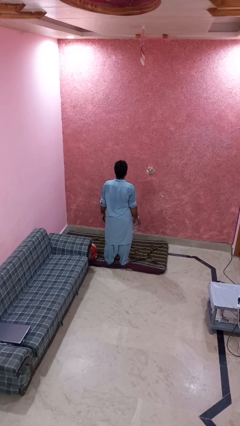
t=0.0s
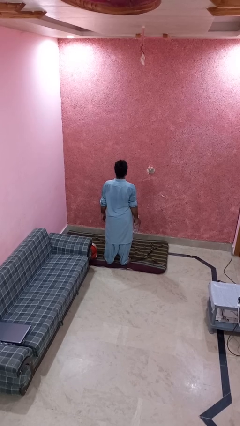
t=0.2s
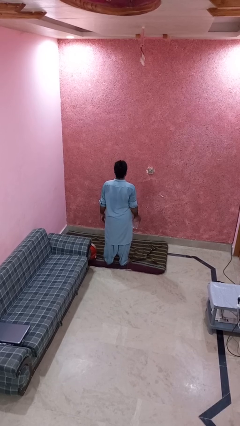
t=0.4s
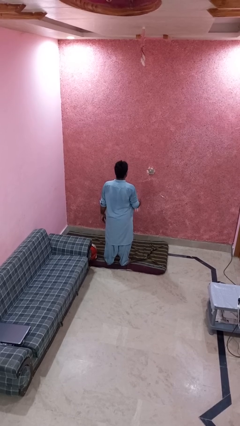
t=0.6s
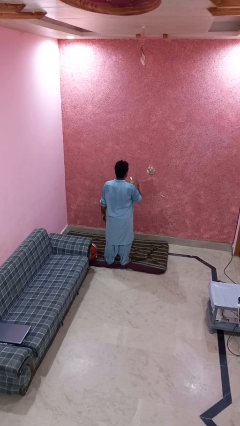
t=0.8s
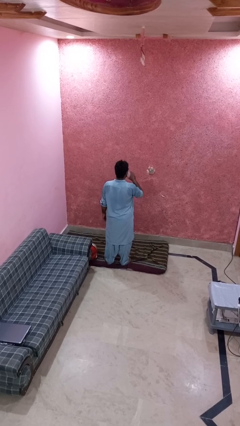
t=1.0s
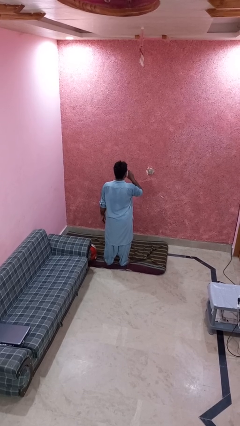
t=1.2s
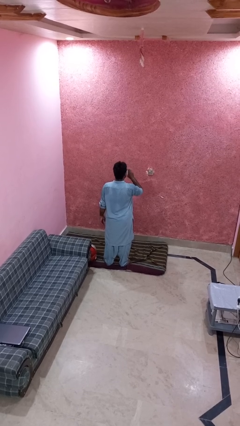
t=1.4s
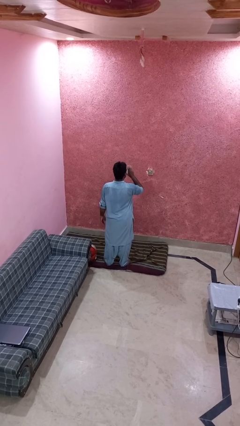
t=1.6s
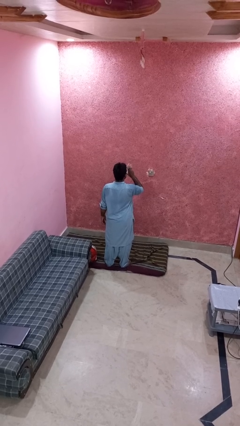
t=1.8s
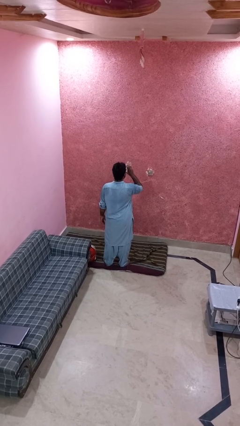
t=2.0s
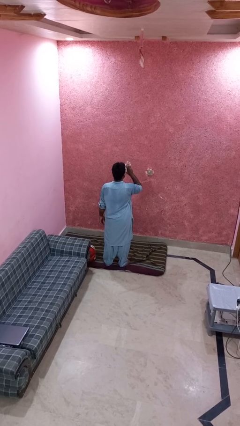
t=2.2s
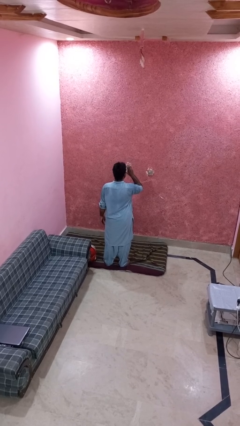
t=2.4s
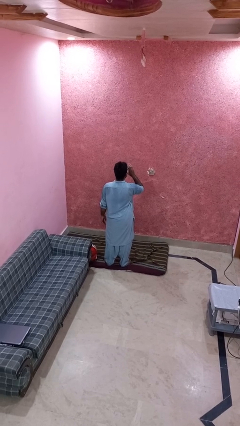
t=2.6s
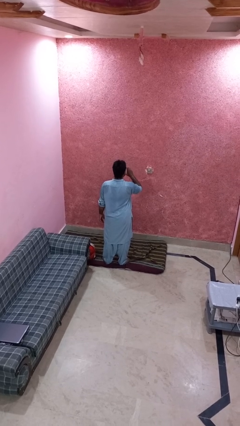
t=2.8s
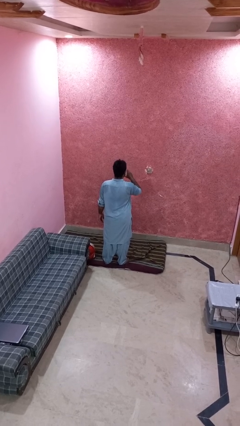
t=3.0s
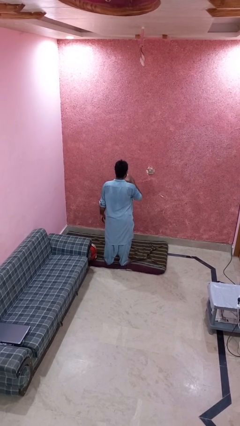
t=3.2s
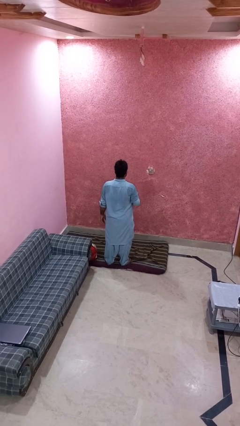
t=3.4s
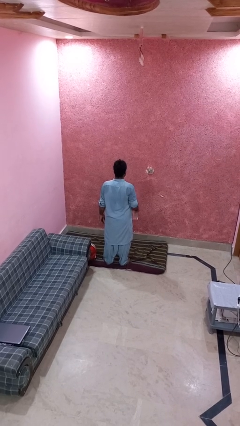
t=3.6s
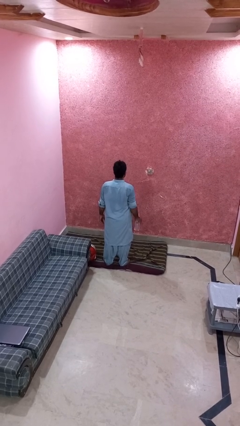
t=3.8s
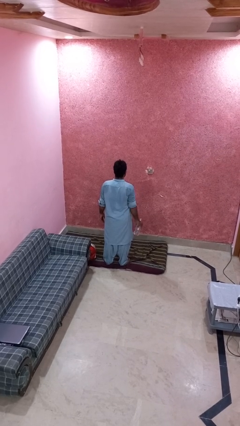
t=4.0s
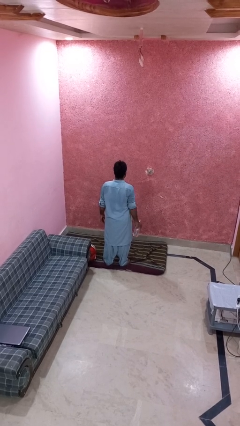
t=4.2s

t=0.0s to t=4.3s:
person drinks from bottle

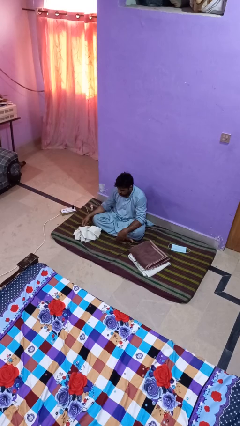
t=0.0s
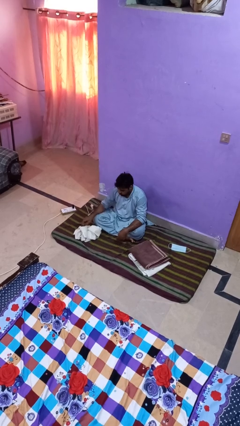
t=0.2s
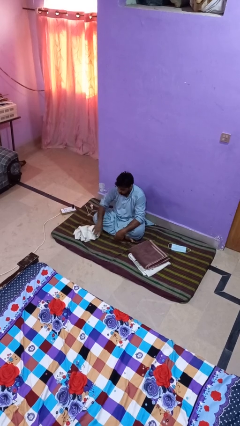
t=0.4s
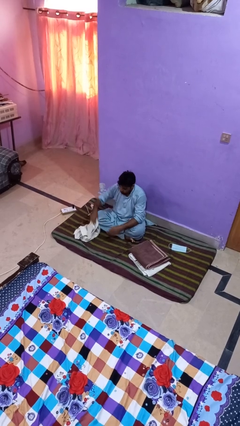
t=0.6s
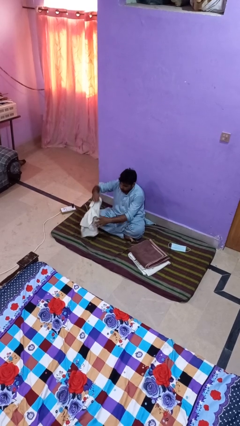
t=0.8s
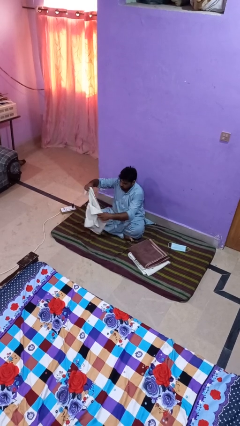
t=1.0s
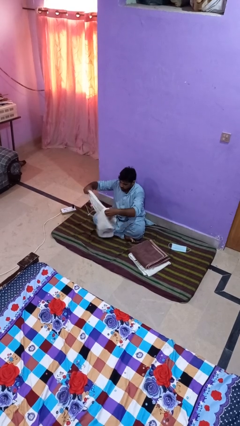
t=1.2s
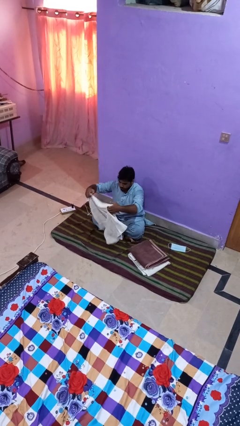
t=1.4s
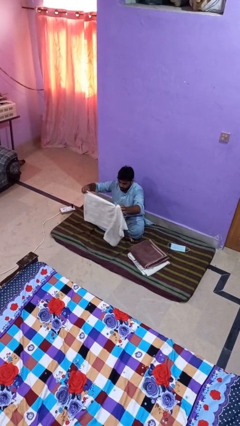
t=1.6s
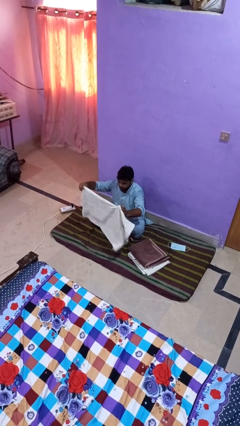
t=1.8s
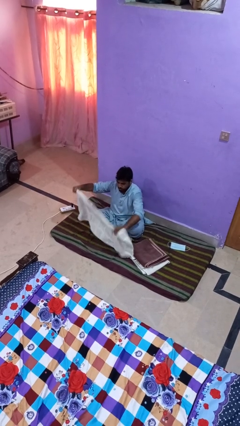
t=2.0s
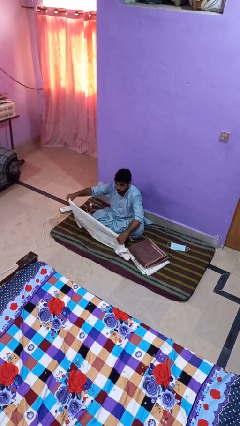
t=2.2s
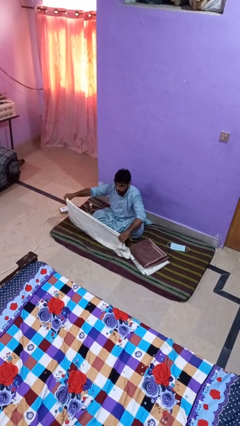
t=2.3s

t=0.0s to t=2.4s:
person folds towel

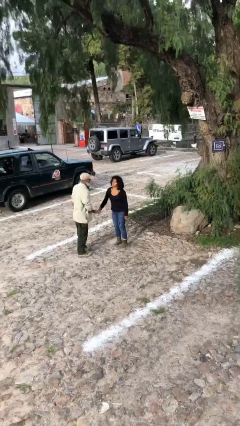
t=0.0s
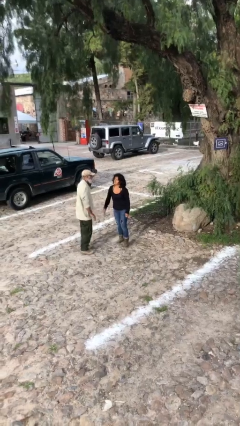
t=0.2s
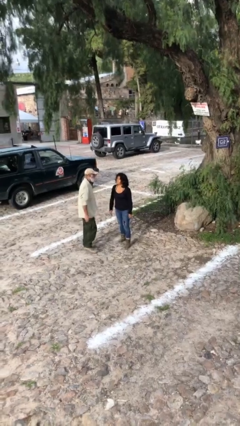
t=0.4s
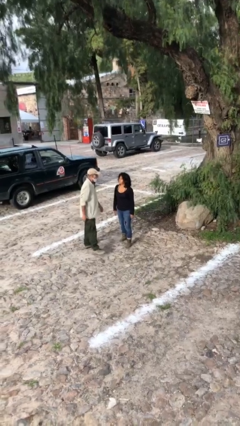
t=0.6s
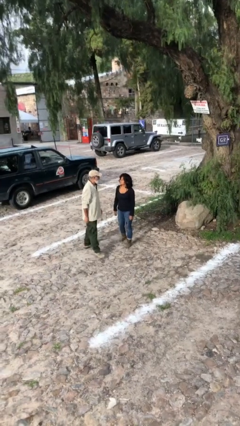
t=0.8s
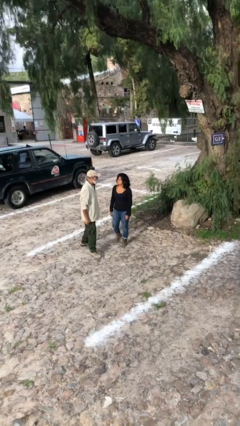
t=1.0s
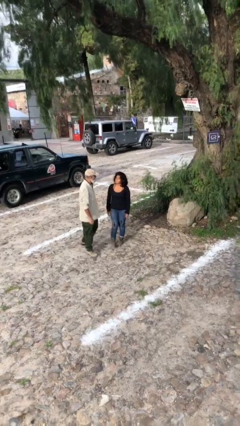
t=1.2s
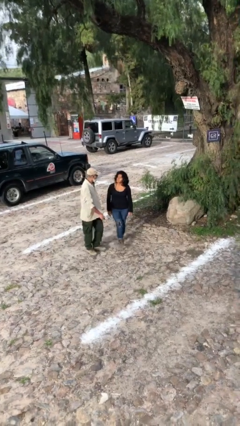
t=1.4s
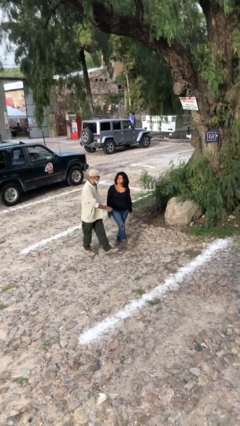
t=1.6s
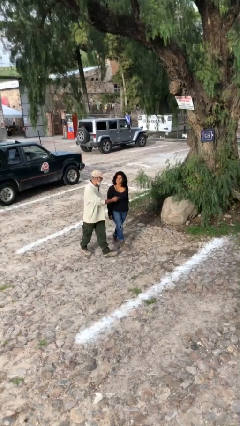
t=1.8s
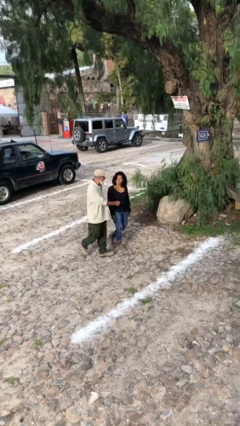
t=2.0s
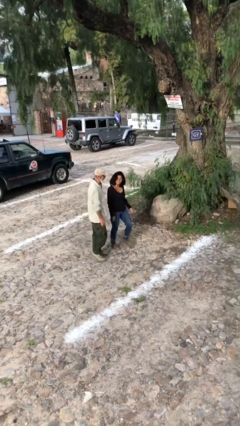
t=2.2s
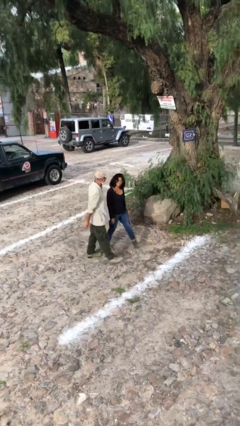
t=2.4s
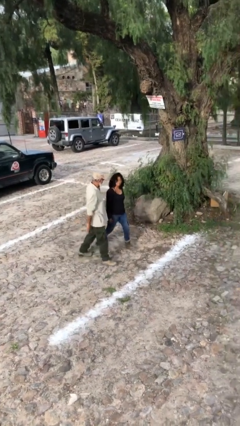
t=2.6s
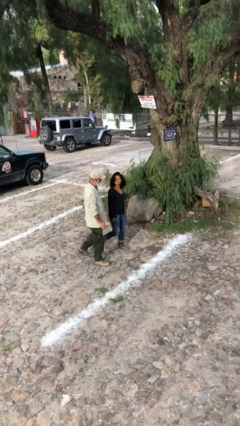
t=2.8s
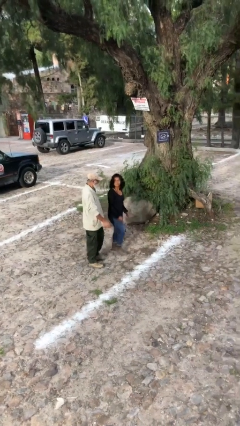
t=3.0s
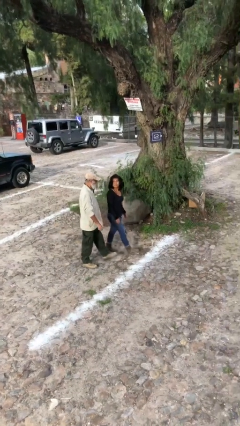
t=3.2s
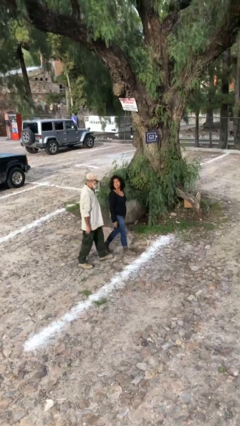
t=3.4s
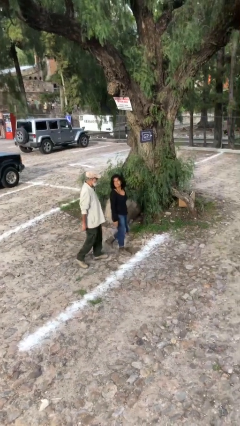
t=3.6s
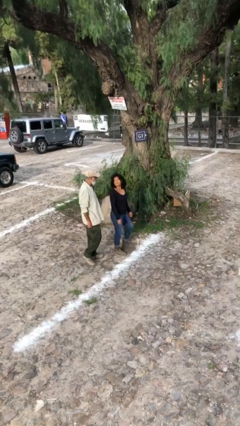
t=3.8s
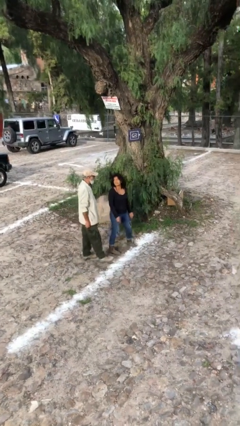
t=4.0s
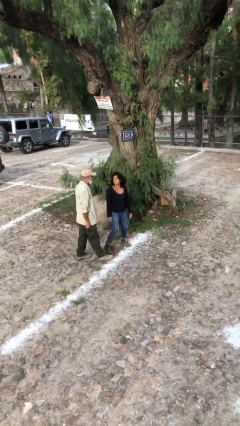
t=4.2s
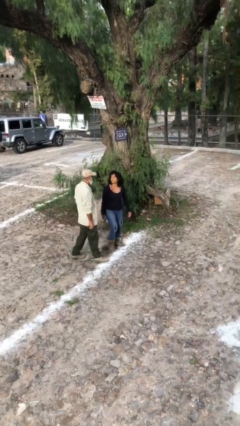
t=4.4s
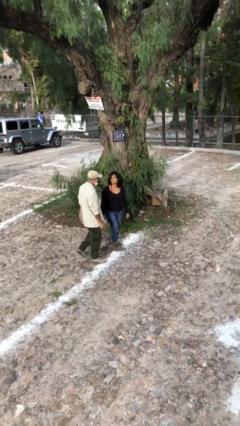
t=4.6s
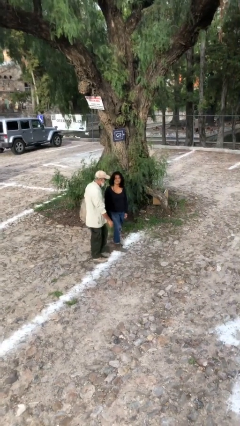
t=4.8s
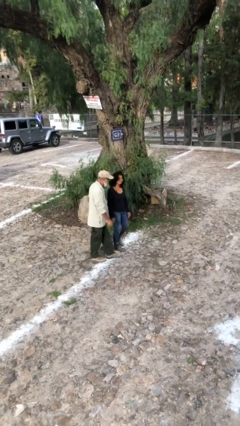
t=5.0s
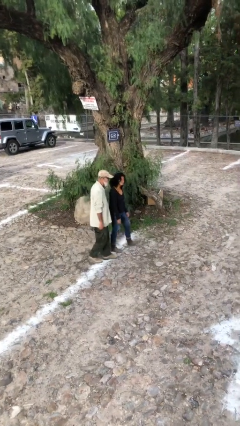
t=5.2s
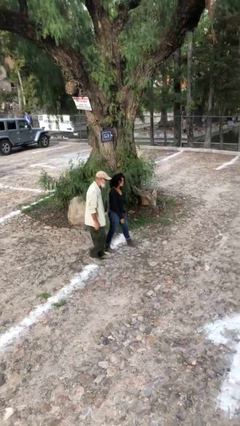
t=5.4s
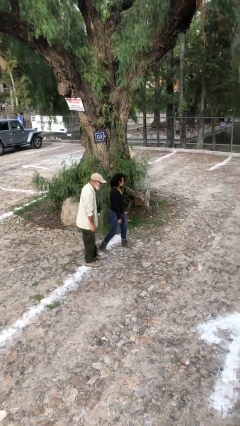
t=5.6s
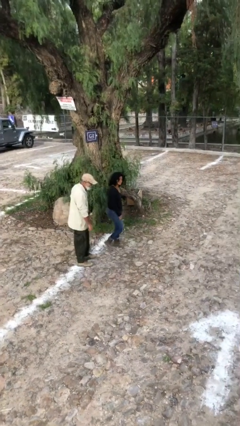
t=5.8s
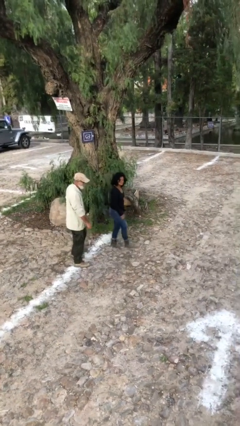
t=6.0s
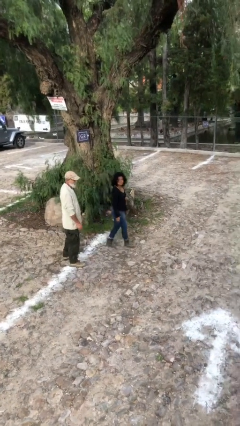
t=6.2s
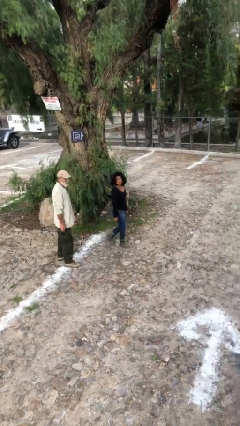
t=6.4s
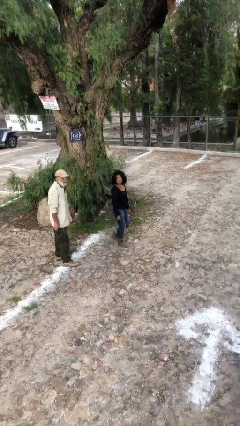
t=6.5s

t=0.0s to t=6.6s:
person talks to person

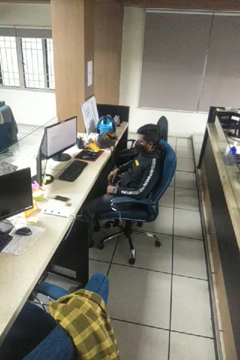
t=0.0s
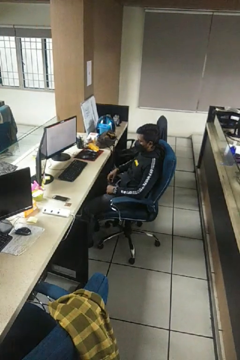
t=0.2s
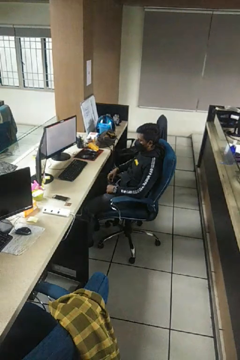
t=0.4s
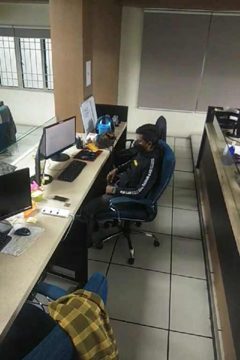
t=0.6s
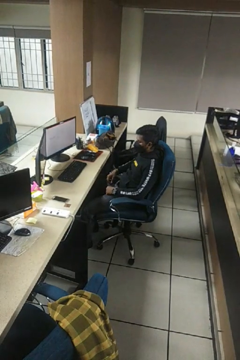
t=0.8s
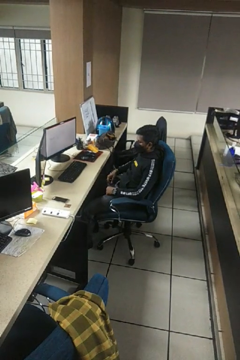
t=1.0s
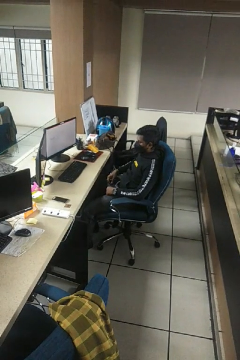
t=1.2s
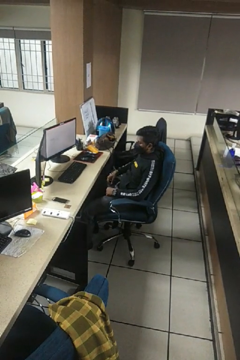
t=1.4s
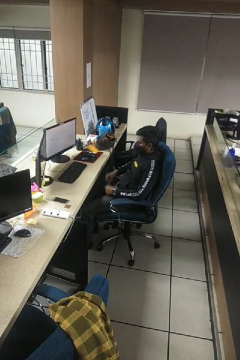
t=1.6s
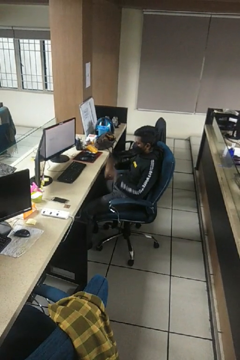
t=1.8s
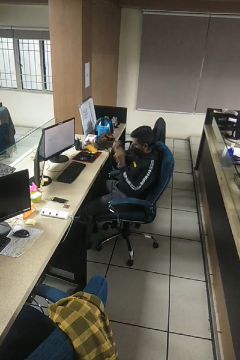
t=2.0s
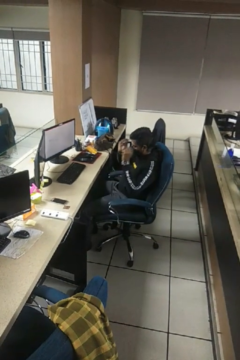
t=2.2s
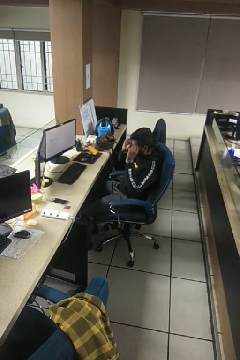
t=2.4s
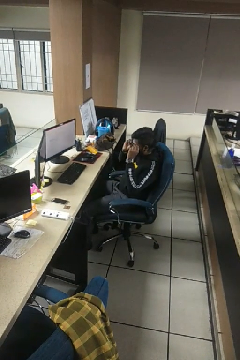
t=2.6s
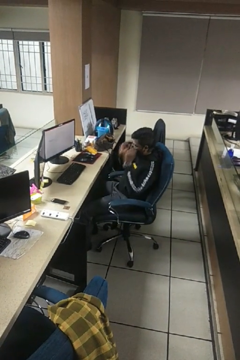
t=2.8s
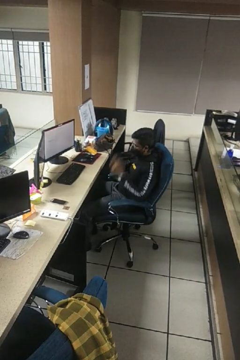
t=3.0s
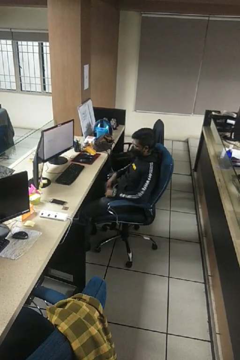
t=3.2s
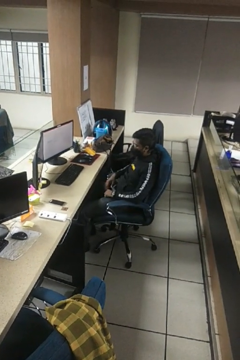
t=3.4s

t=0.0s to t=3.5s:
person puts on glasses

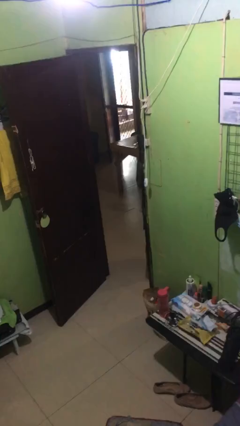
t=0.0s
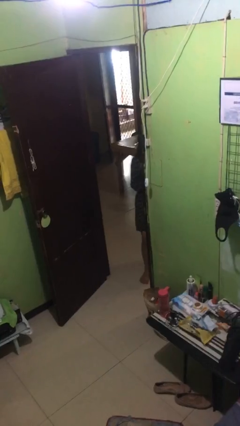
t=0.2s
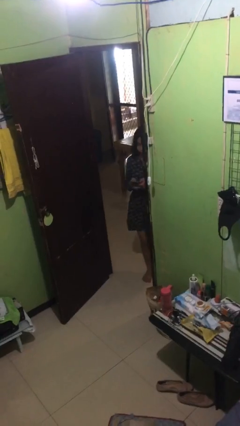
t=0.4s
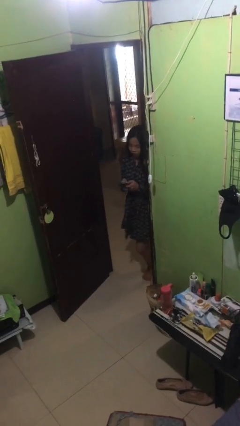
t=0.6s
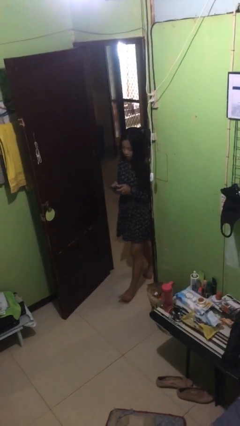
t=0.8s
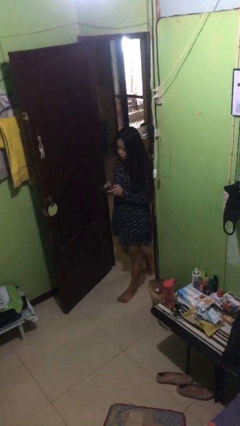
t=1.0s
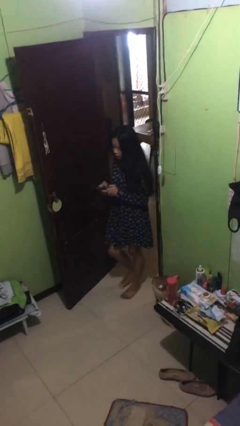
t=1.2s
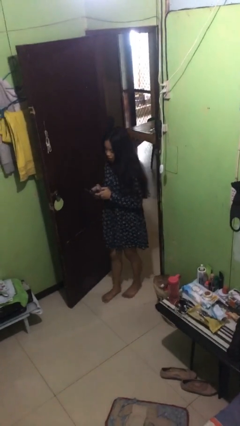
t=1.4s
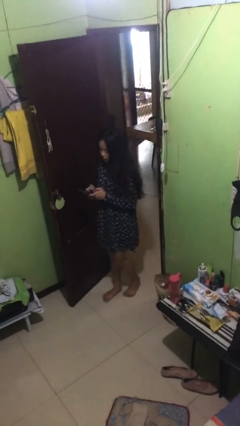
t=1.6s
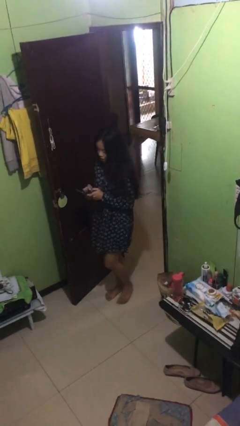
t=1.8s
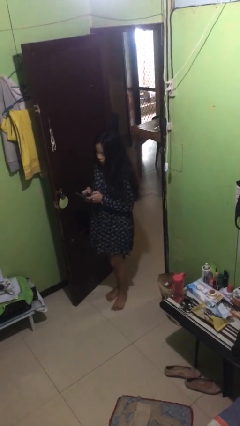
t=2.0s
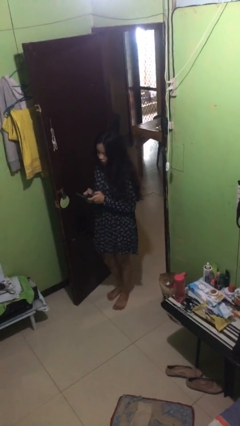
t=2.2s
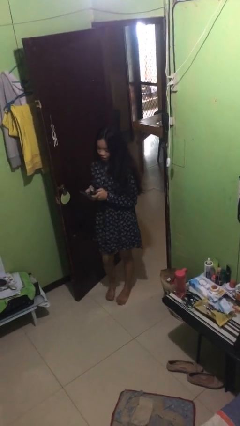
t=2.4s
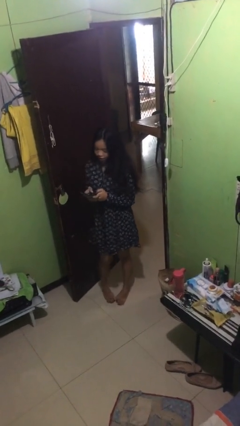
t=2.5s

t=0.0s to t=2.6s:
person enters scene through structure
